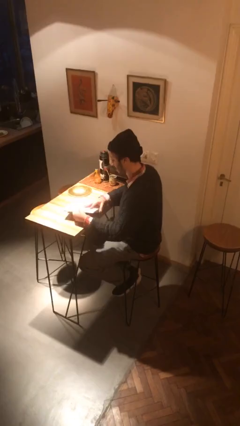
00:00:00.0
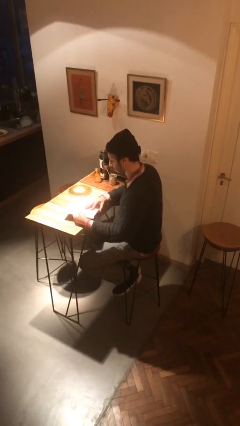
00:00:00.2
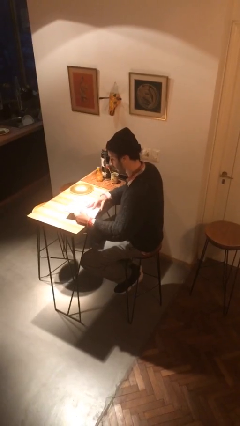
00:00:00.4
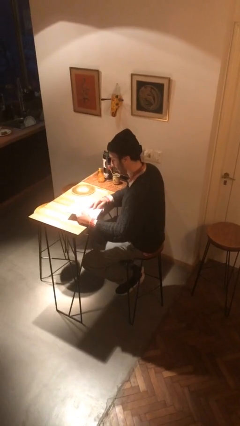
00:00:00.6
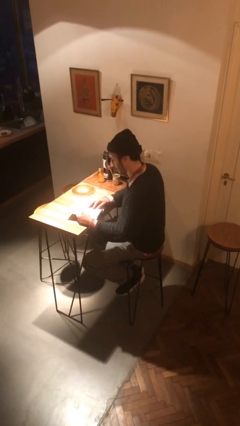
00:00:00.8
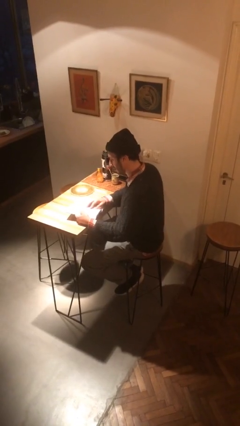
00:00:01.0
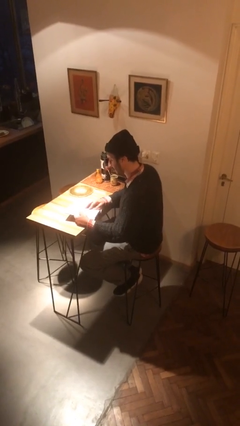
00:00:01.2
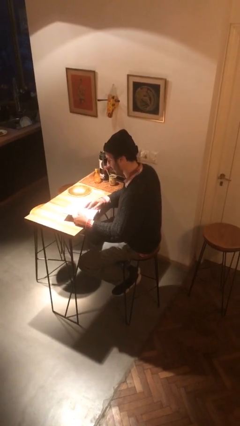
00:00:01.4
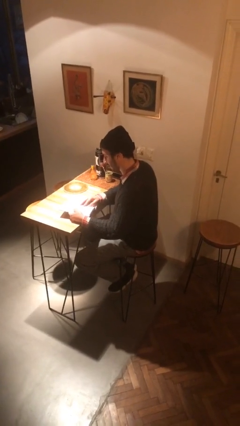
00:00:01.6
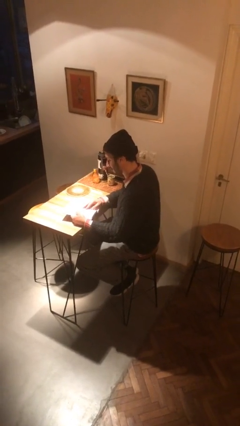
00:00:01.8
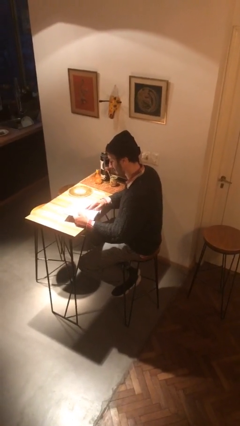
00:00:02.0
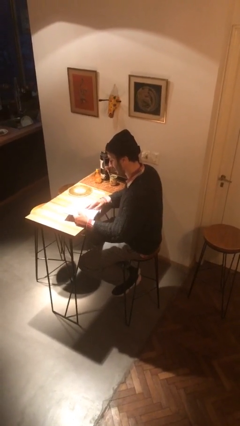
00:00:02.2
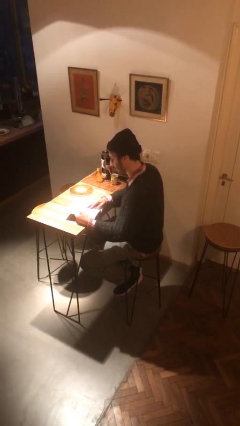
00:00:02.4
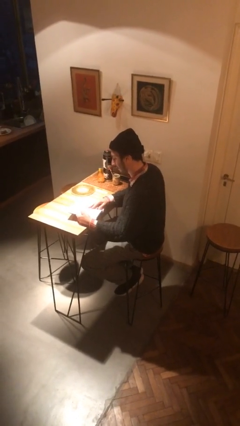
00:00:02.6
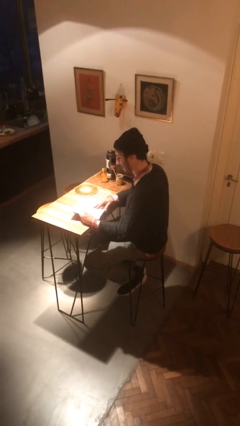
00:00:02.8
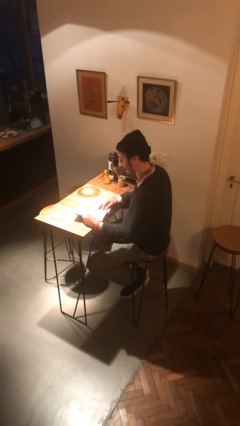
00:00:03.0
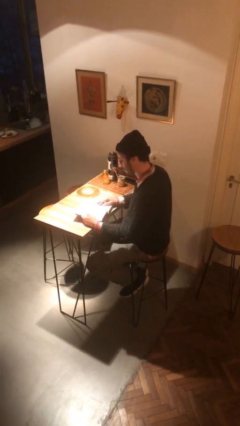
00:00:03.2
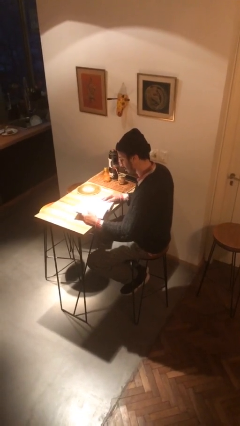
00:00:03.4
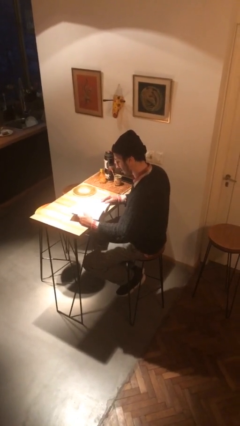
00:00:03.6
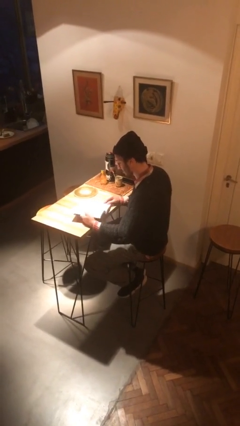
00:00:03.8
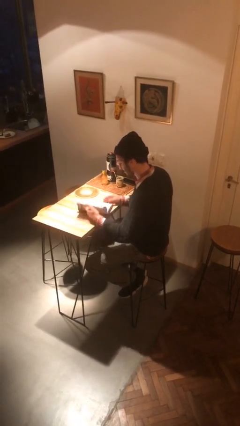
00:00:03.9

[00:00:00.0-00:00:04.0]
person reads book

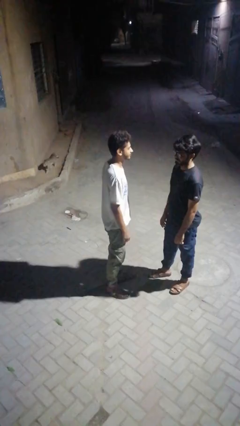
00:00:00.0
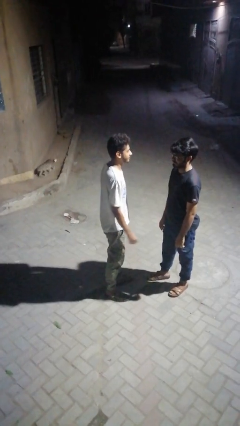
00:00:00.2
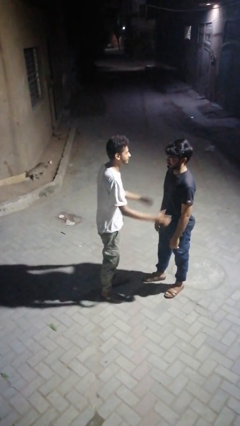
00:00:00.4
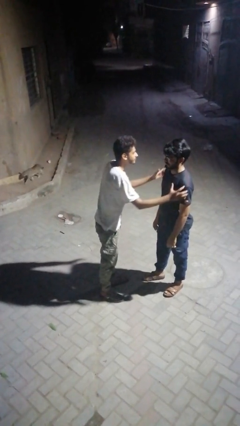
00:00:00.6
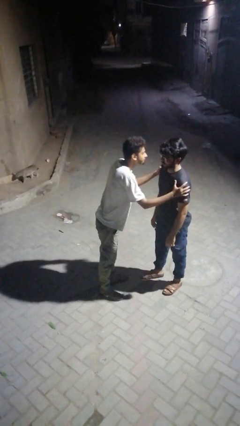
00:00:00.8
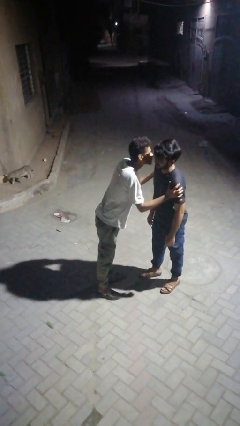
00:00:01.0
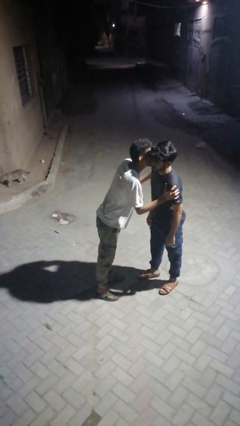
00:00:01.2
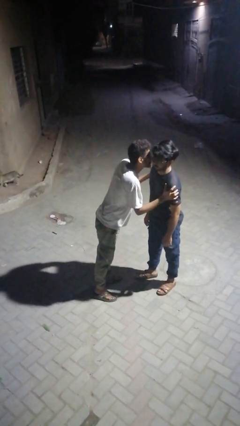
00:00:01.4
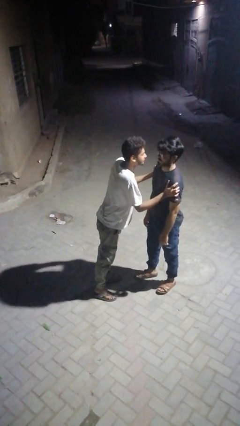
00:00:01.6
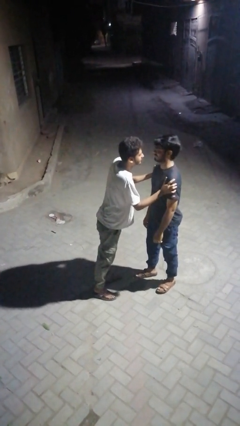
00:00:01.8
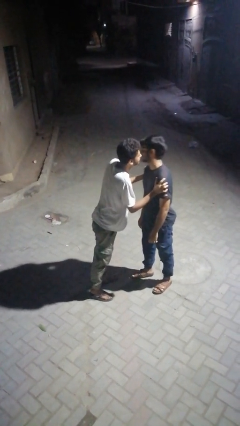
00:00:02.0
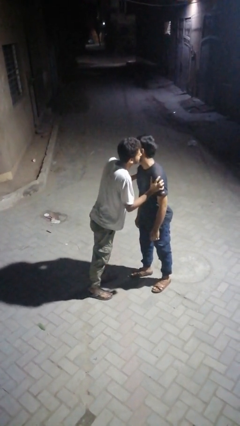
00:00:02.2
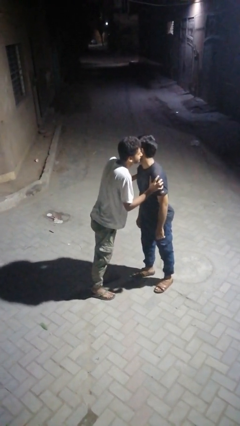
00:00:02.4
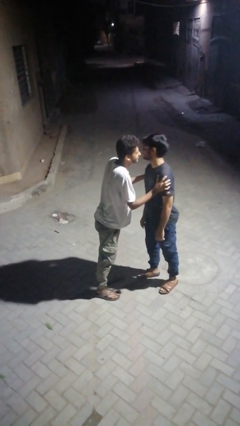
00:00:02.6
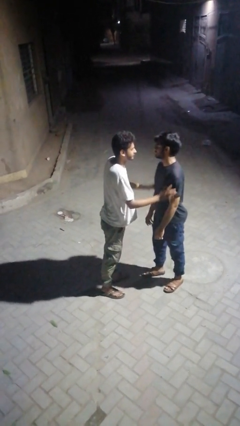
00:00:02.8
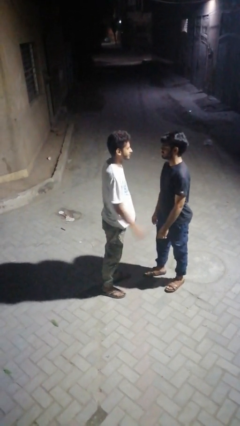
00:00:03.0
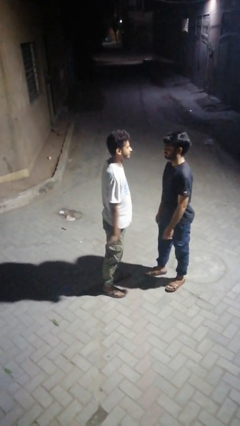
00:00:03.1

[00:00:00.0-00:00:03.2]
person kisses cheek of person

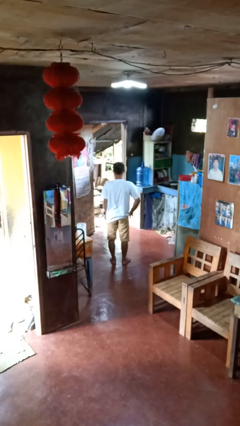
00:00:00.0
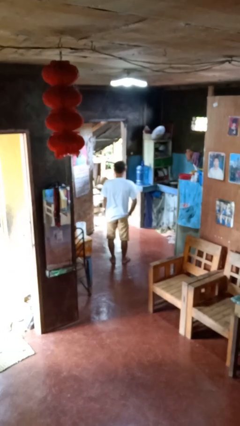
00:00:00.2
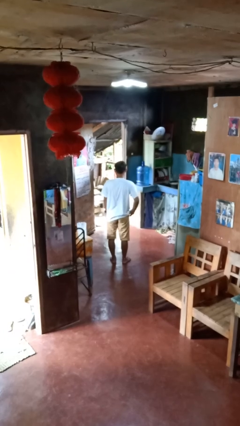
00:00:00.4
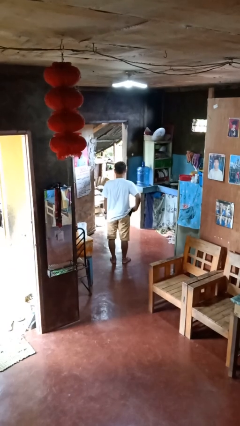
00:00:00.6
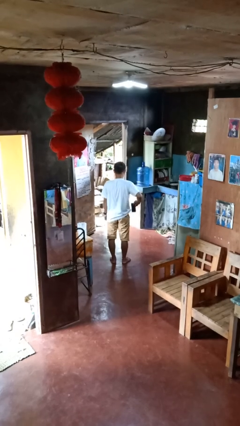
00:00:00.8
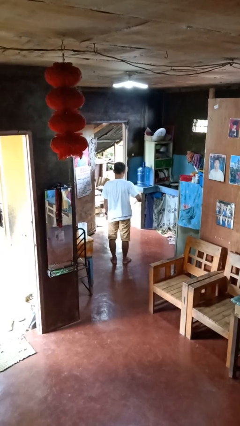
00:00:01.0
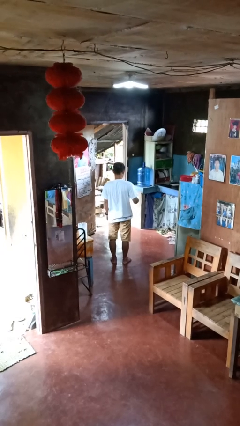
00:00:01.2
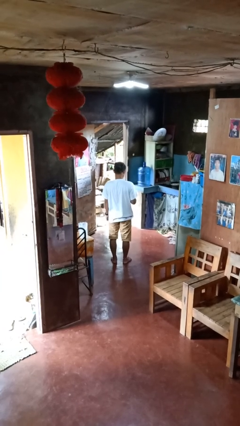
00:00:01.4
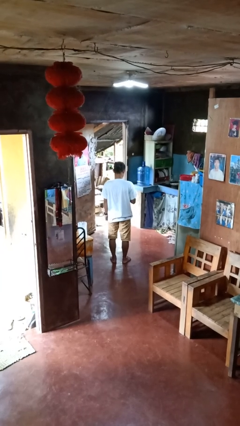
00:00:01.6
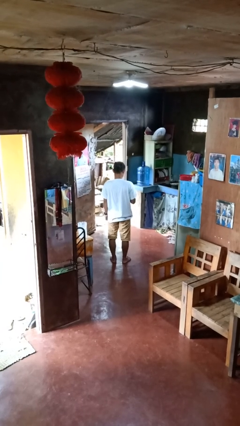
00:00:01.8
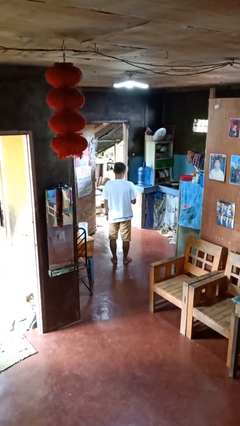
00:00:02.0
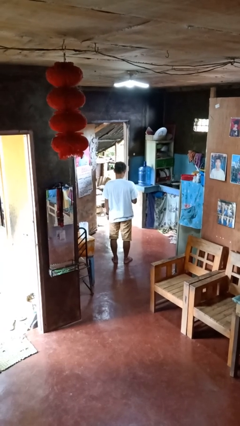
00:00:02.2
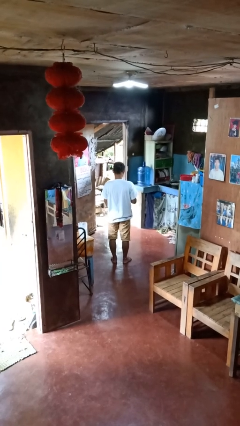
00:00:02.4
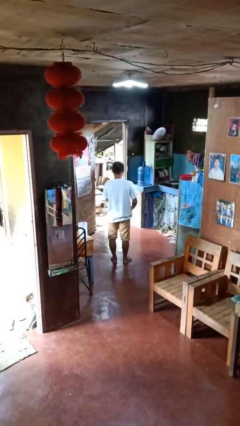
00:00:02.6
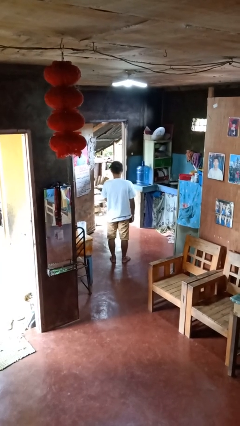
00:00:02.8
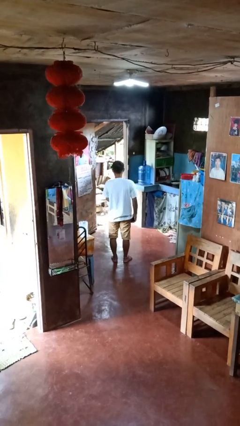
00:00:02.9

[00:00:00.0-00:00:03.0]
person takes phone from pocket

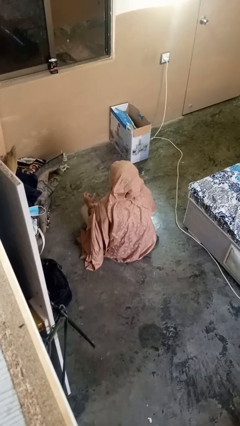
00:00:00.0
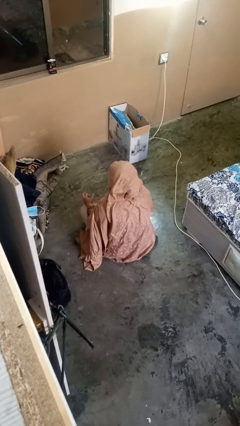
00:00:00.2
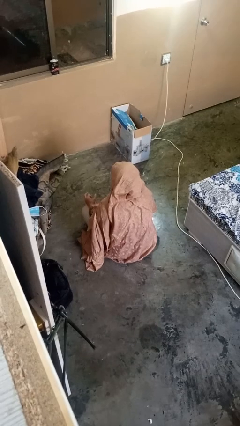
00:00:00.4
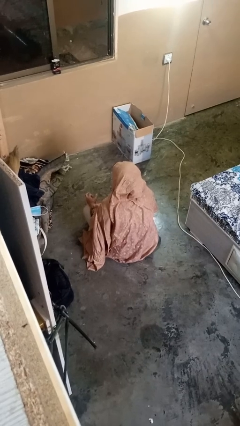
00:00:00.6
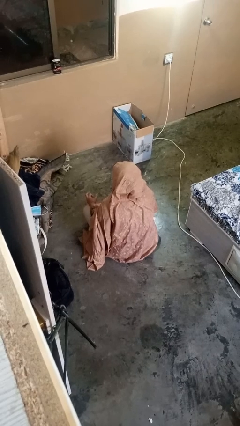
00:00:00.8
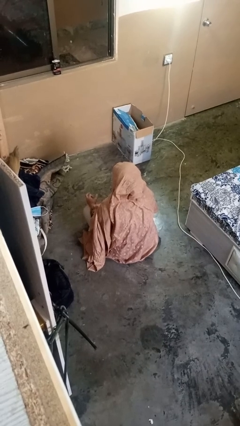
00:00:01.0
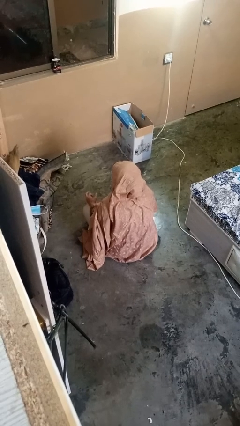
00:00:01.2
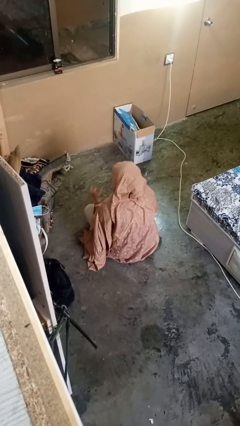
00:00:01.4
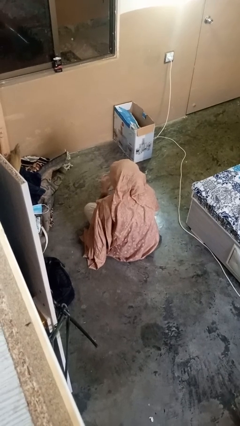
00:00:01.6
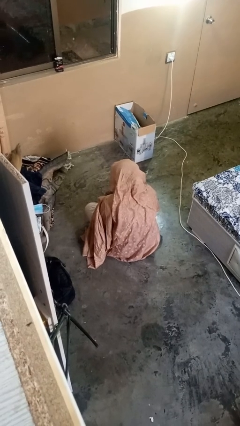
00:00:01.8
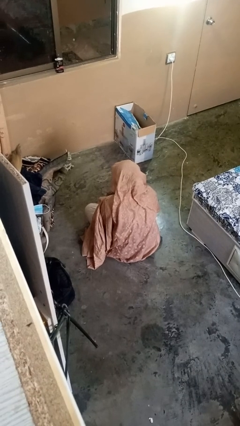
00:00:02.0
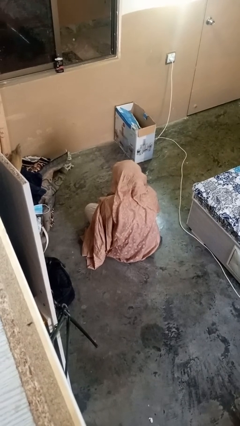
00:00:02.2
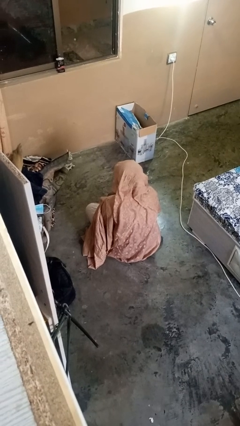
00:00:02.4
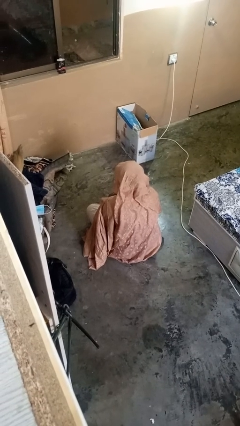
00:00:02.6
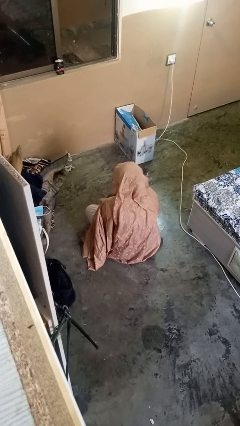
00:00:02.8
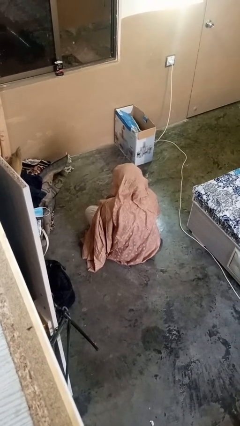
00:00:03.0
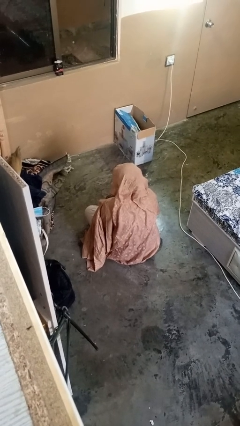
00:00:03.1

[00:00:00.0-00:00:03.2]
person drinks from straw

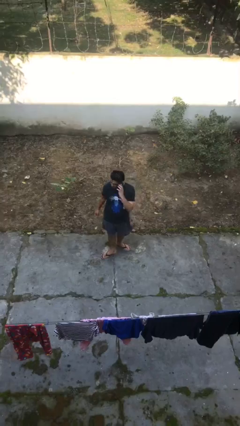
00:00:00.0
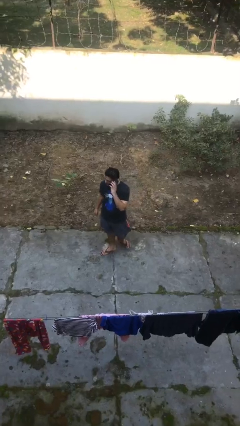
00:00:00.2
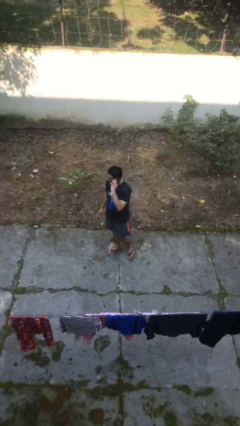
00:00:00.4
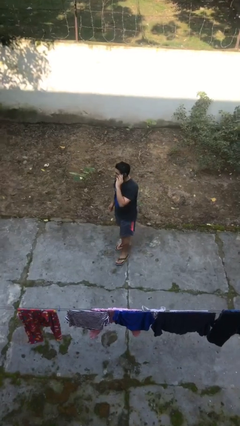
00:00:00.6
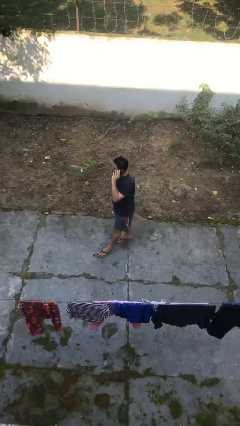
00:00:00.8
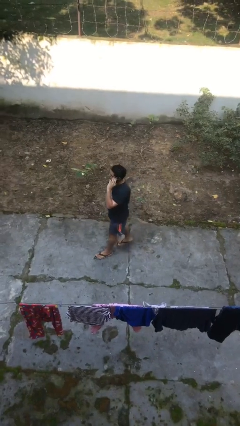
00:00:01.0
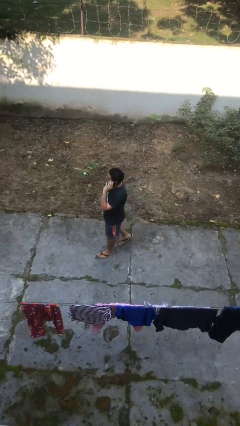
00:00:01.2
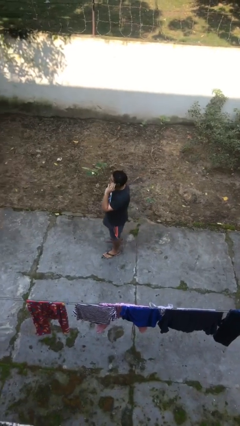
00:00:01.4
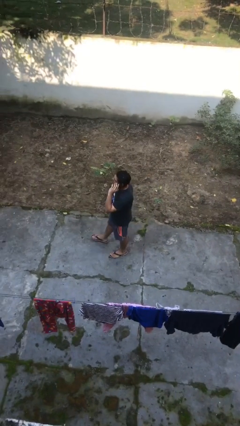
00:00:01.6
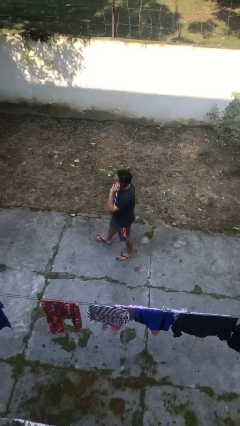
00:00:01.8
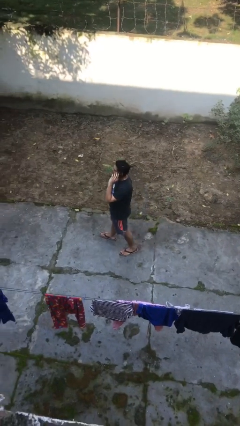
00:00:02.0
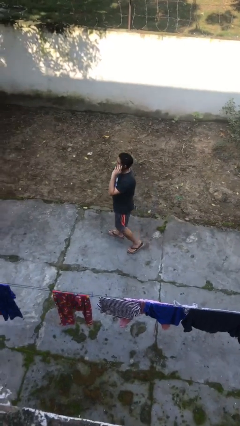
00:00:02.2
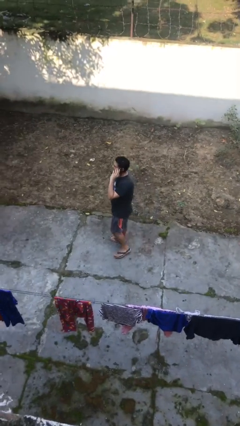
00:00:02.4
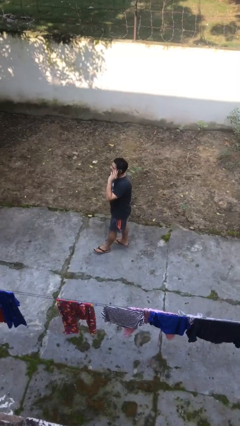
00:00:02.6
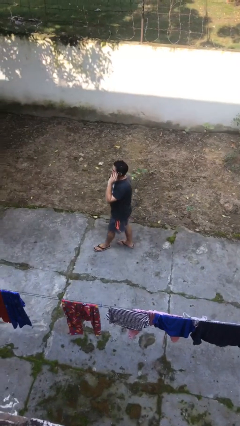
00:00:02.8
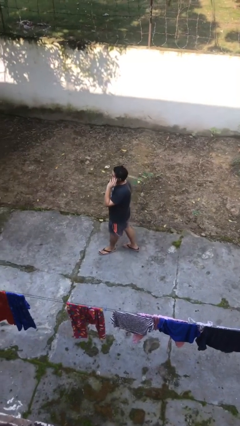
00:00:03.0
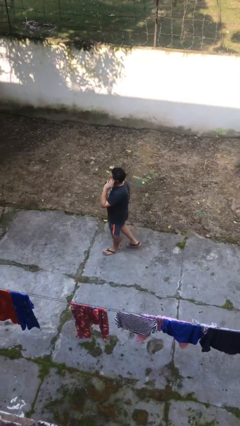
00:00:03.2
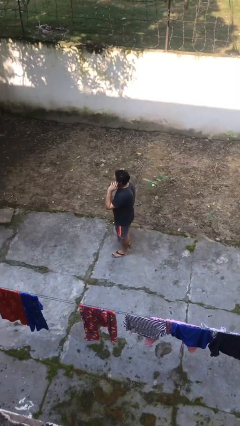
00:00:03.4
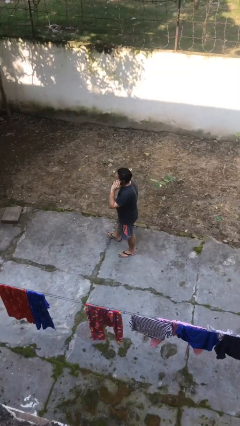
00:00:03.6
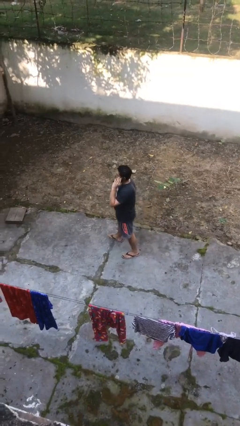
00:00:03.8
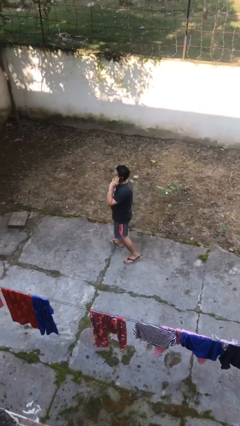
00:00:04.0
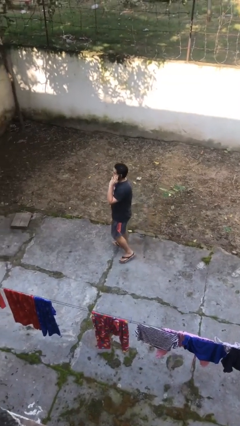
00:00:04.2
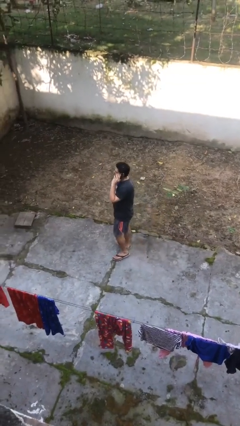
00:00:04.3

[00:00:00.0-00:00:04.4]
person talks on phone
